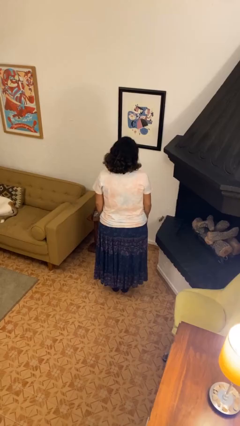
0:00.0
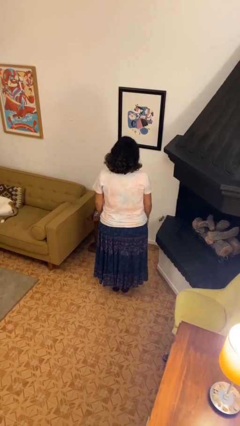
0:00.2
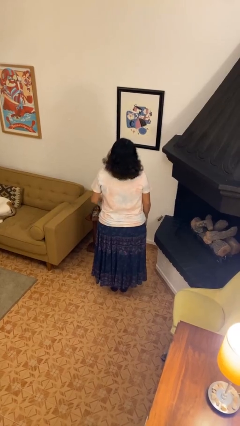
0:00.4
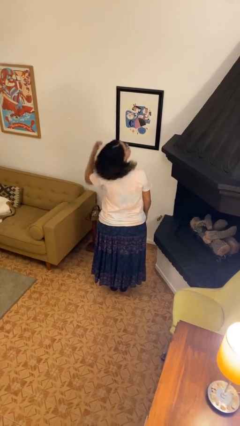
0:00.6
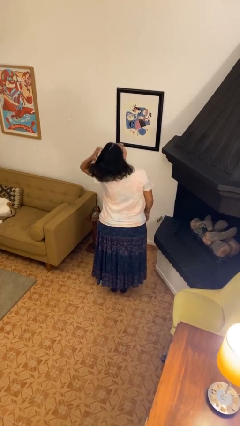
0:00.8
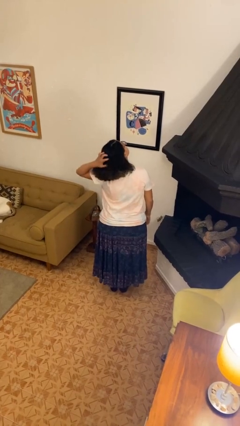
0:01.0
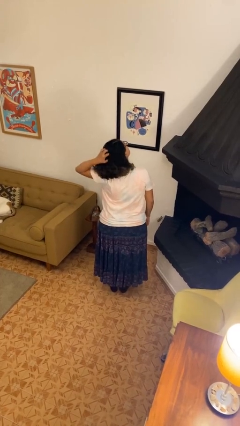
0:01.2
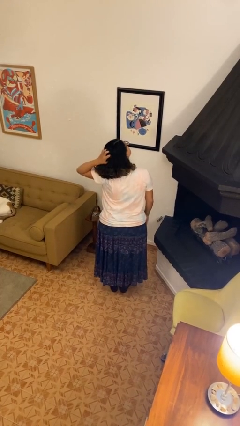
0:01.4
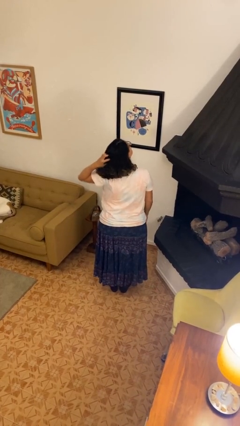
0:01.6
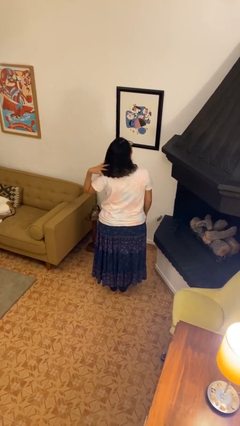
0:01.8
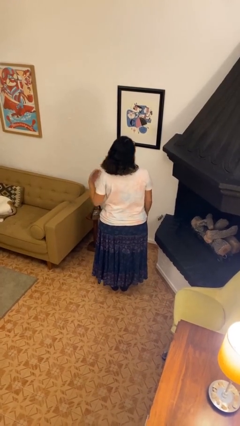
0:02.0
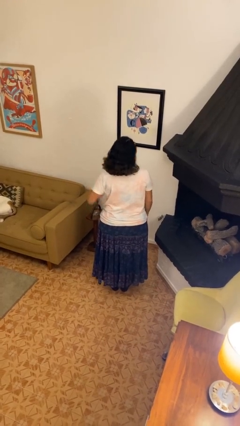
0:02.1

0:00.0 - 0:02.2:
person scratches face

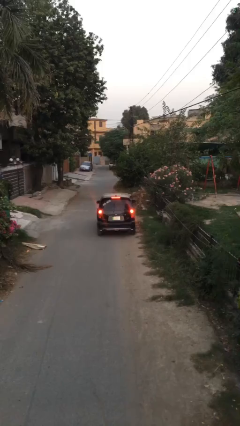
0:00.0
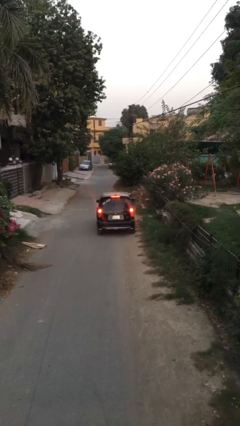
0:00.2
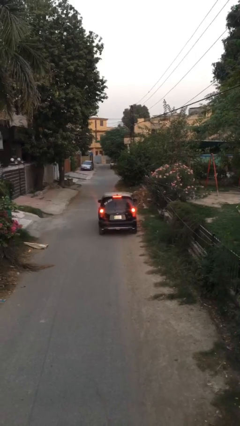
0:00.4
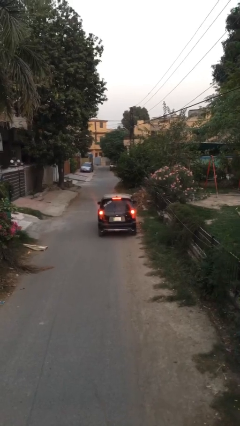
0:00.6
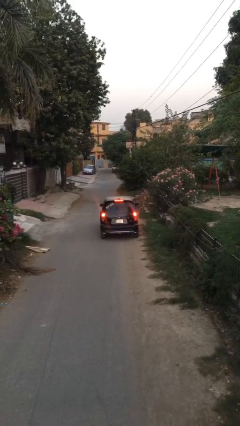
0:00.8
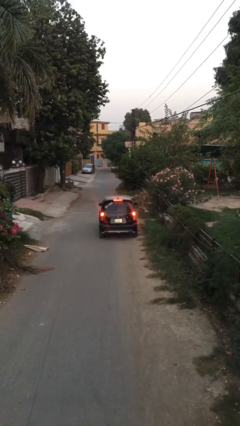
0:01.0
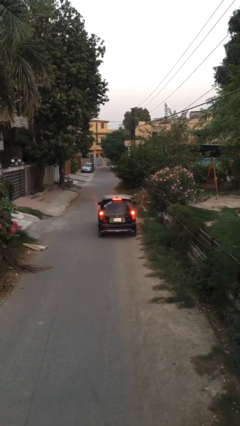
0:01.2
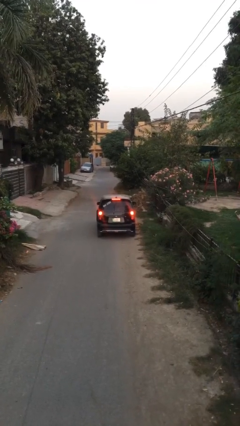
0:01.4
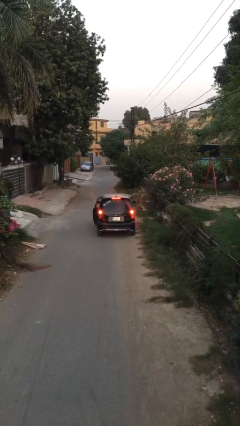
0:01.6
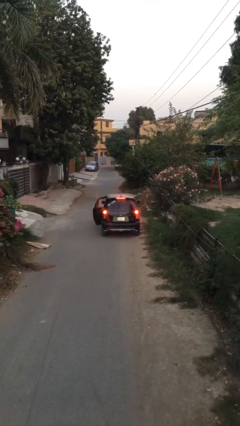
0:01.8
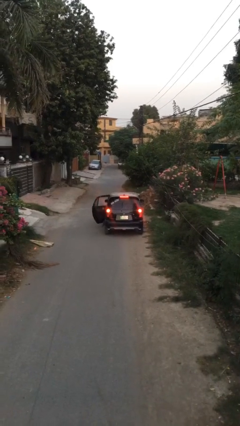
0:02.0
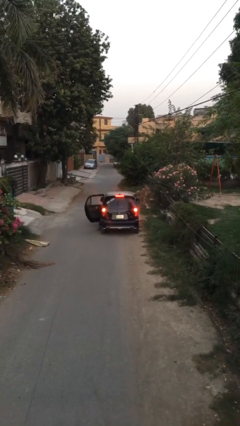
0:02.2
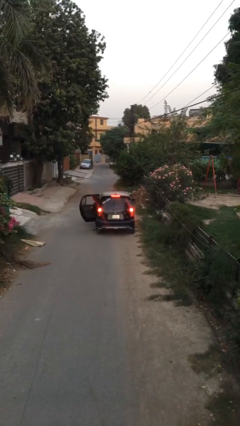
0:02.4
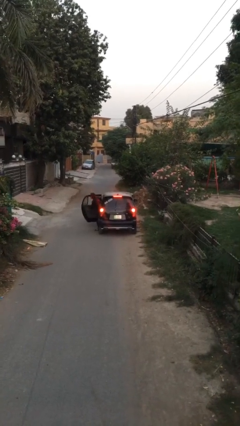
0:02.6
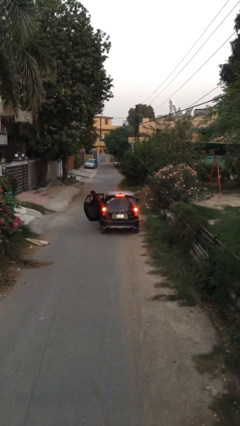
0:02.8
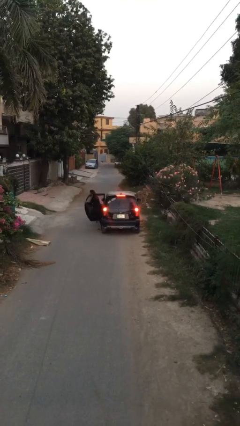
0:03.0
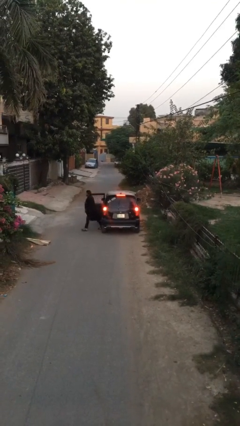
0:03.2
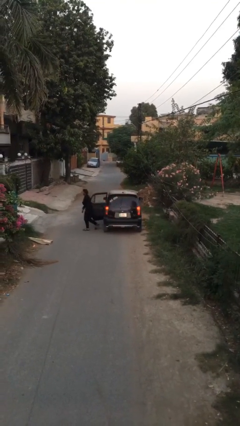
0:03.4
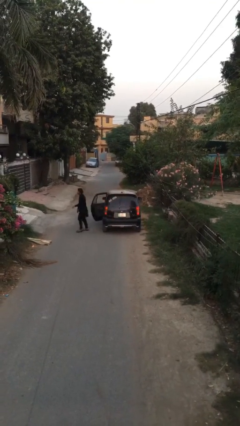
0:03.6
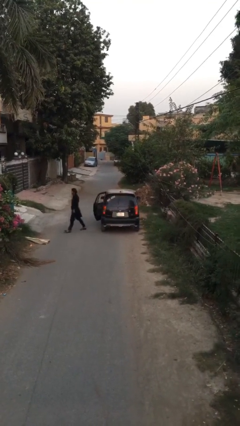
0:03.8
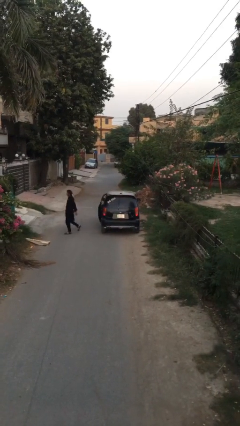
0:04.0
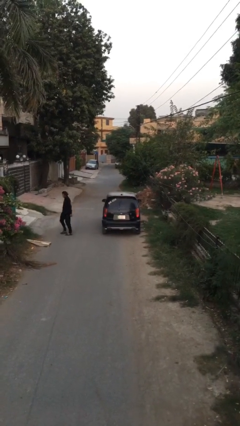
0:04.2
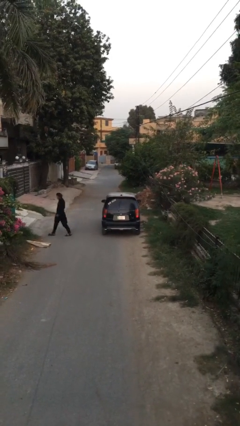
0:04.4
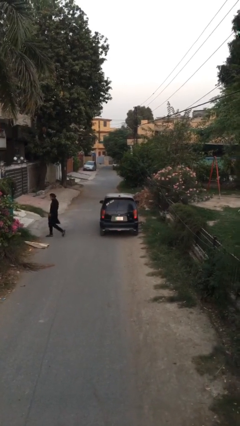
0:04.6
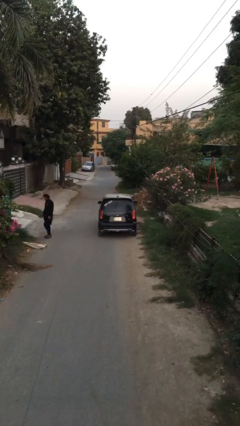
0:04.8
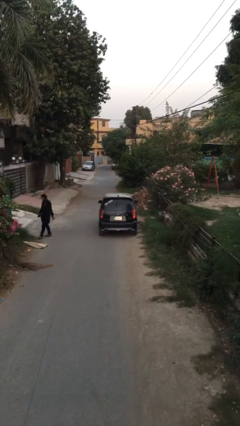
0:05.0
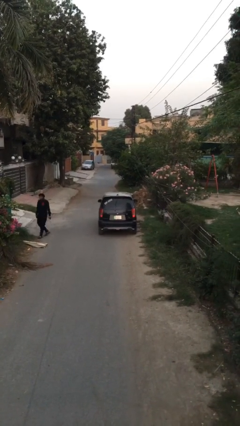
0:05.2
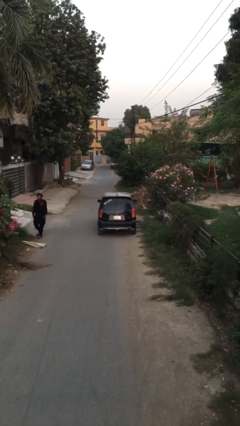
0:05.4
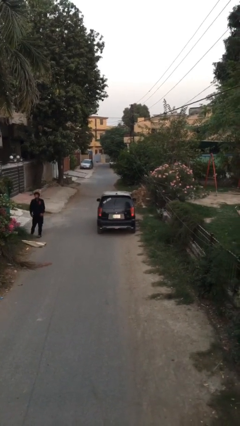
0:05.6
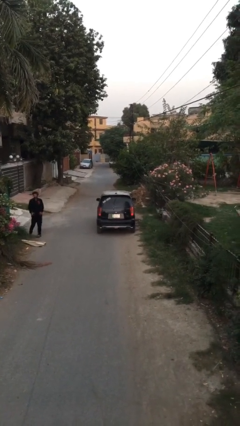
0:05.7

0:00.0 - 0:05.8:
car drops off person

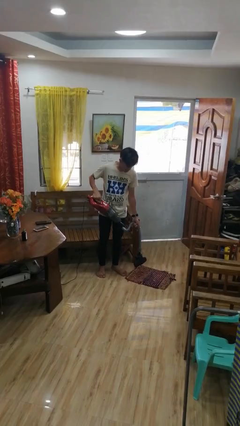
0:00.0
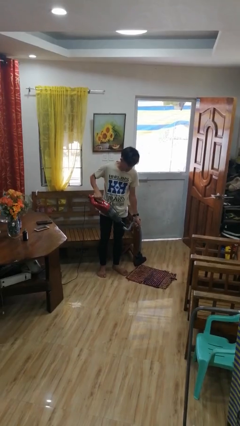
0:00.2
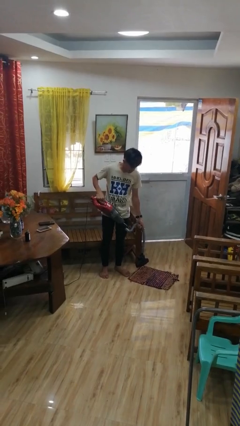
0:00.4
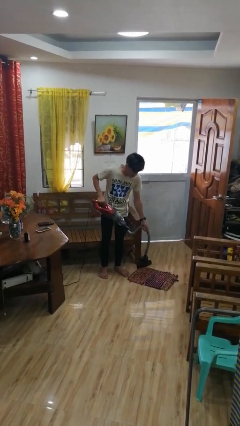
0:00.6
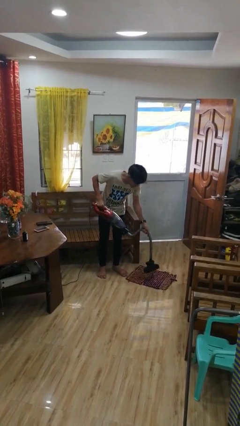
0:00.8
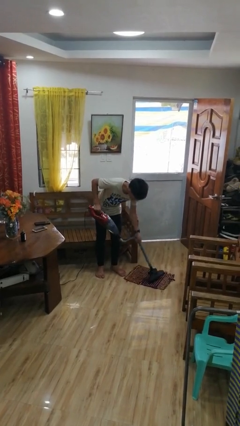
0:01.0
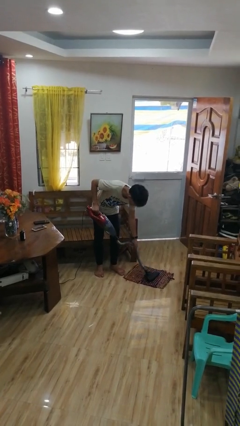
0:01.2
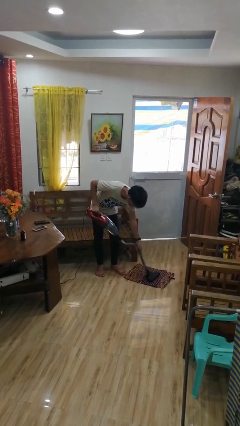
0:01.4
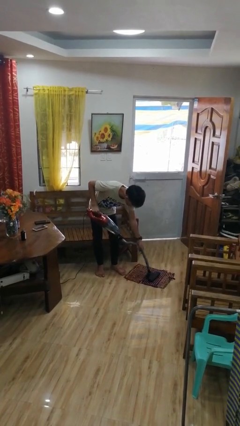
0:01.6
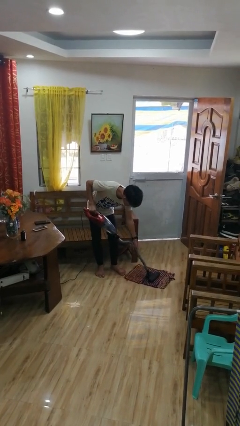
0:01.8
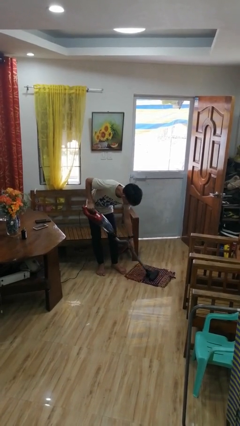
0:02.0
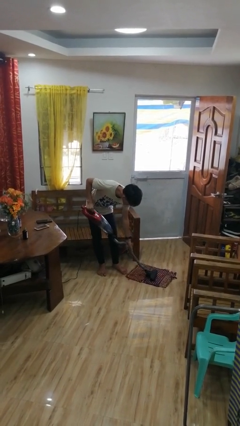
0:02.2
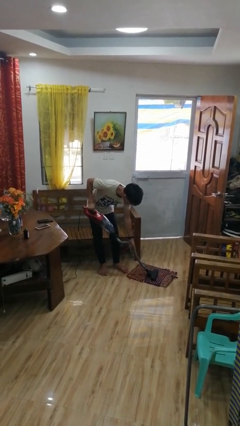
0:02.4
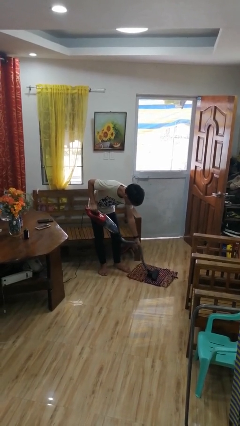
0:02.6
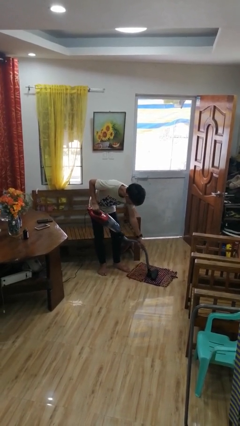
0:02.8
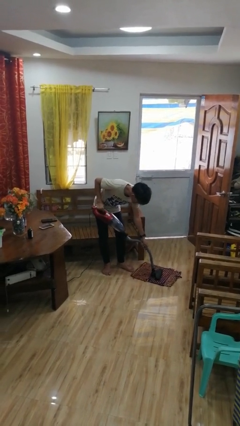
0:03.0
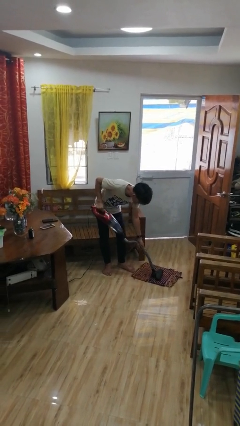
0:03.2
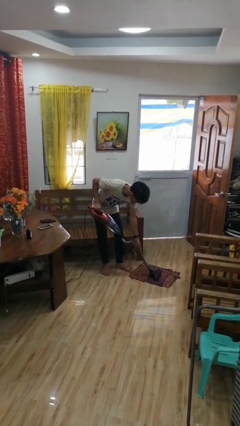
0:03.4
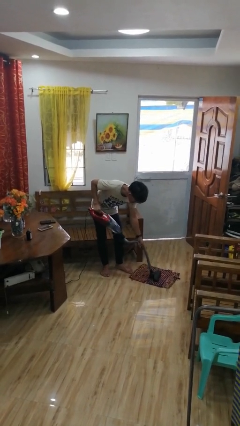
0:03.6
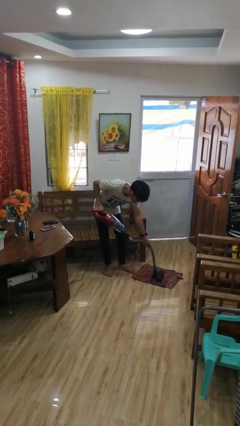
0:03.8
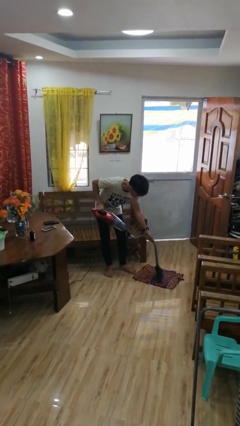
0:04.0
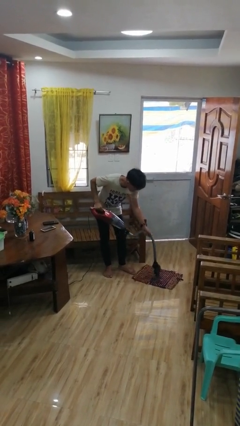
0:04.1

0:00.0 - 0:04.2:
person vacuums carpet

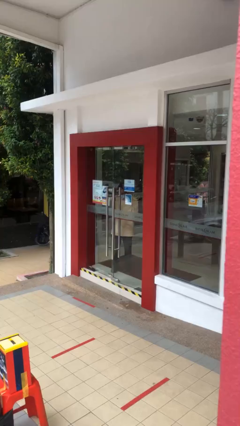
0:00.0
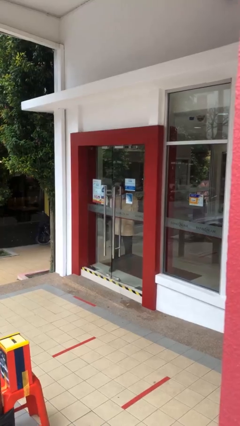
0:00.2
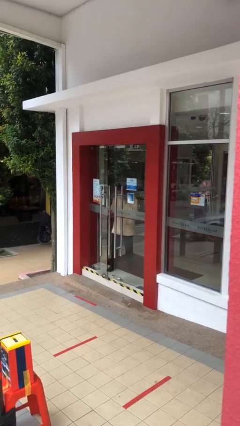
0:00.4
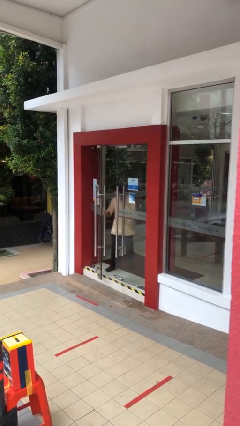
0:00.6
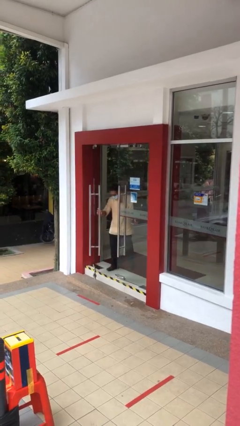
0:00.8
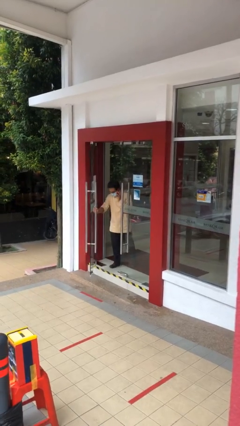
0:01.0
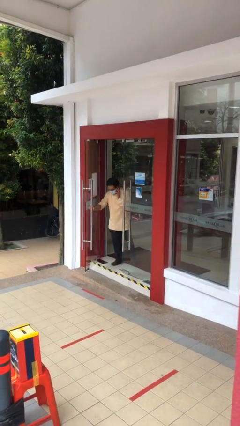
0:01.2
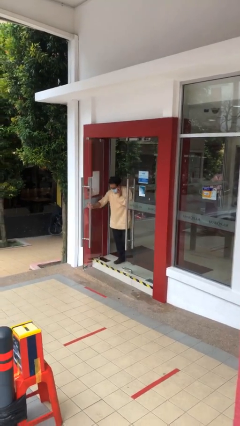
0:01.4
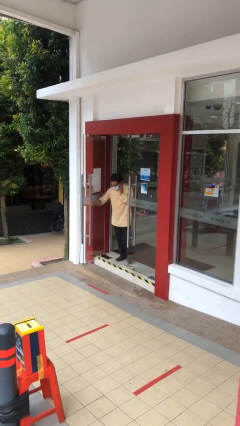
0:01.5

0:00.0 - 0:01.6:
person opens facility door

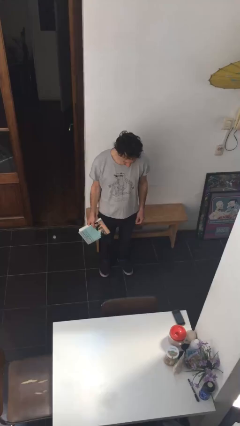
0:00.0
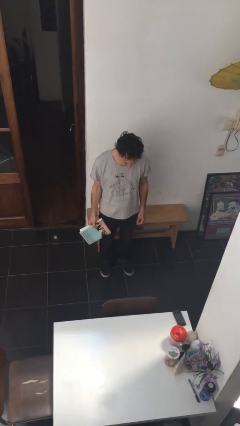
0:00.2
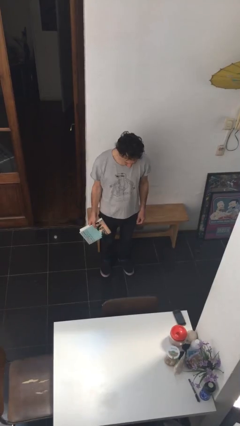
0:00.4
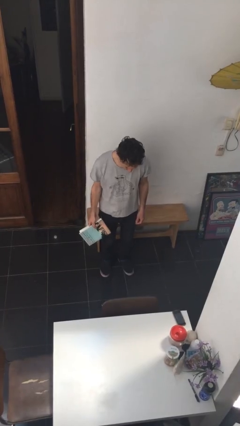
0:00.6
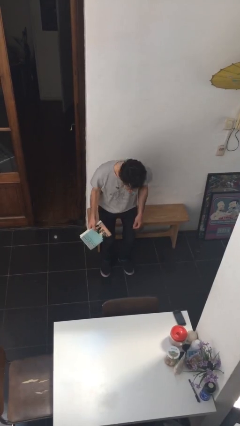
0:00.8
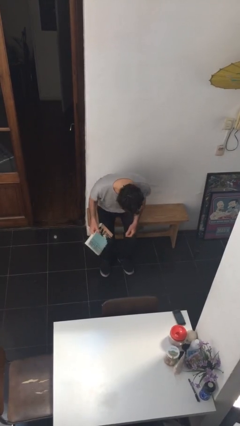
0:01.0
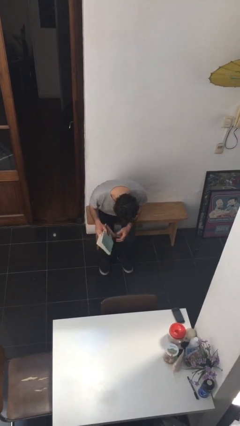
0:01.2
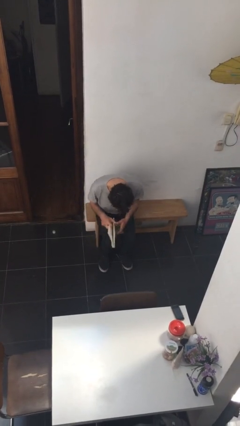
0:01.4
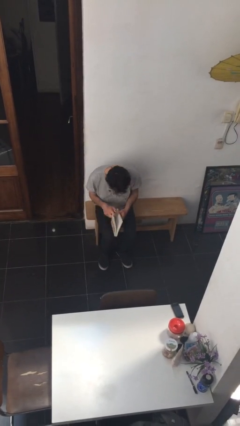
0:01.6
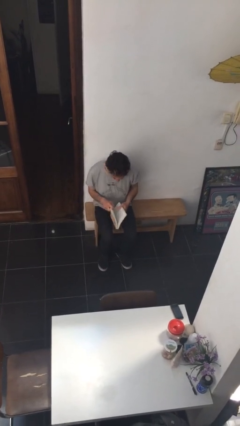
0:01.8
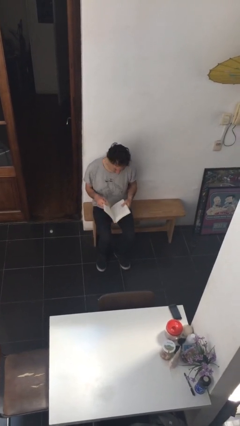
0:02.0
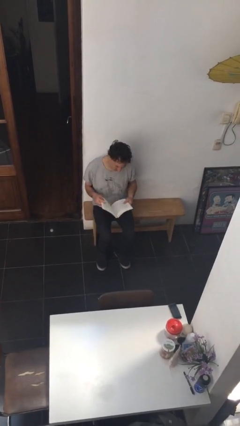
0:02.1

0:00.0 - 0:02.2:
person sits down

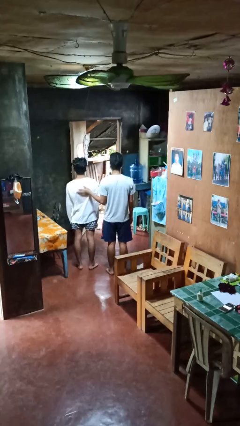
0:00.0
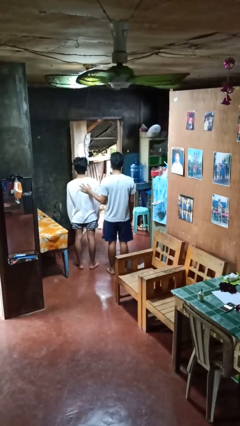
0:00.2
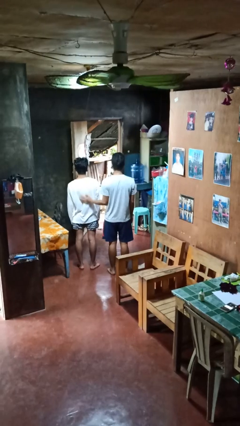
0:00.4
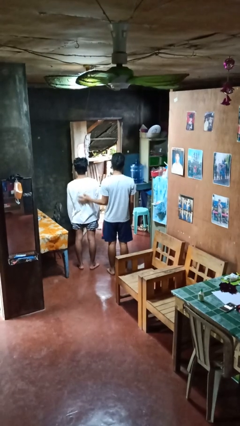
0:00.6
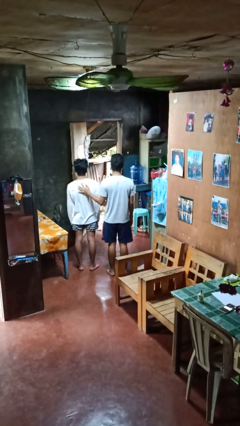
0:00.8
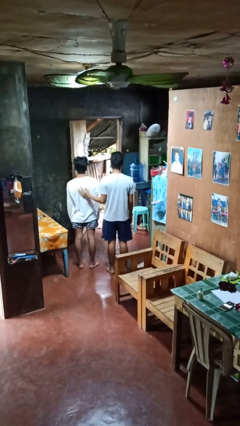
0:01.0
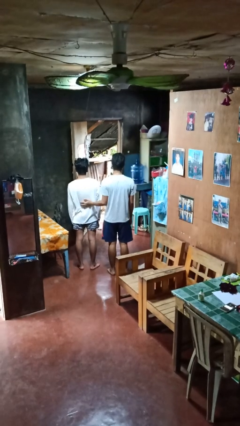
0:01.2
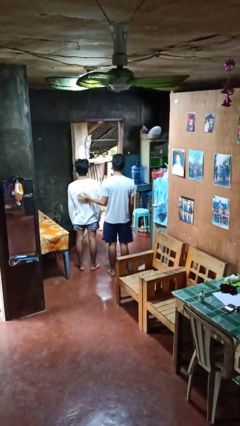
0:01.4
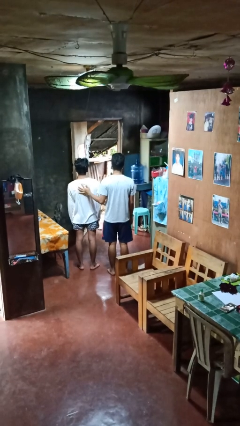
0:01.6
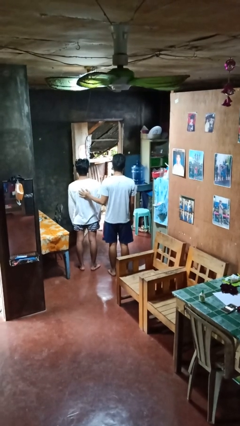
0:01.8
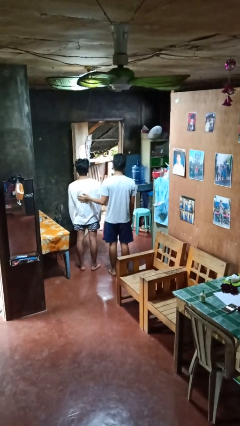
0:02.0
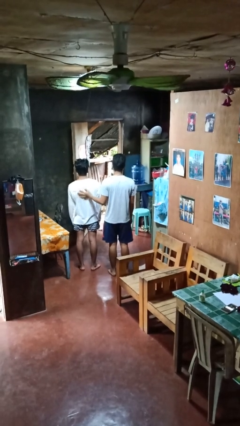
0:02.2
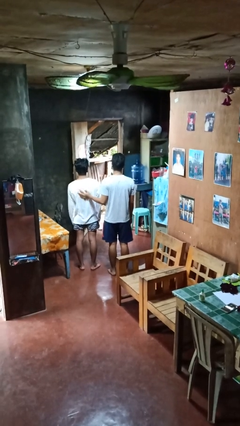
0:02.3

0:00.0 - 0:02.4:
person touches back of person
